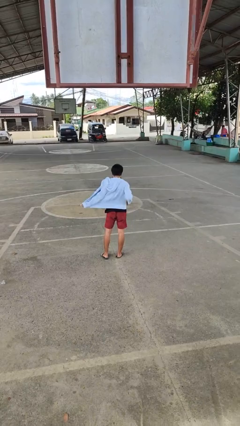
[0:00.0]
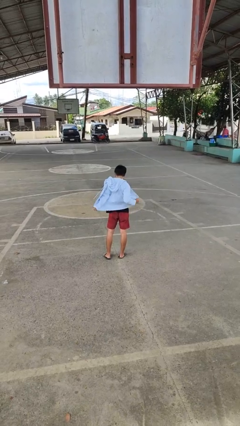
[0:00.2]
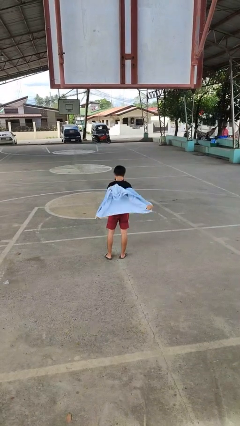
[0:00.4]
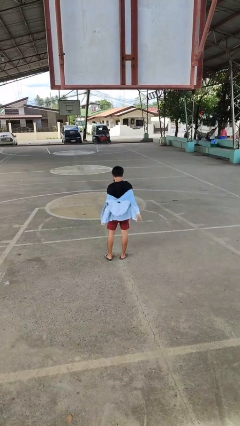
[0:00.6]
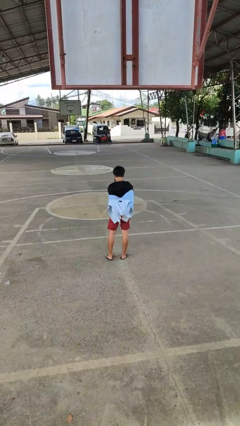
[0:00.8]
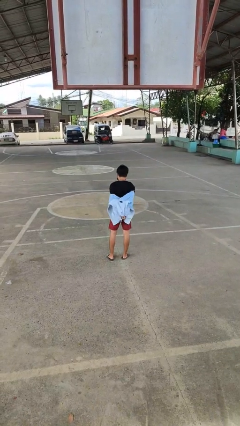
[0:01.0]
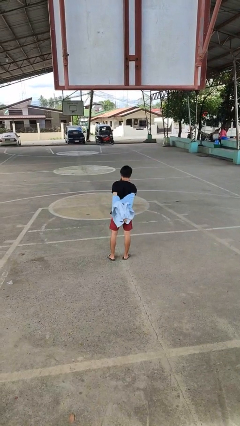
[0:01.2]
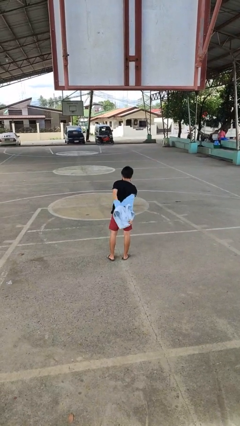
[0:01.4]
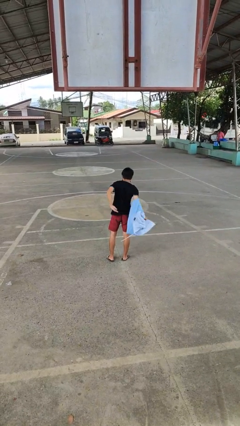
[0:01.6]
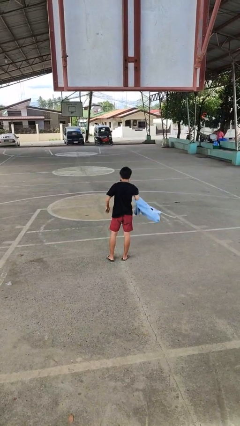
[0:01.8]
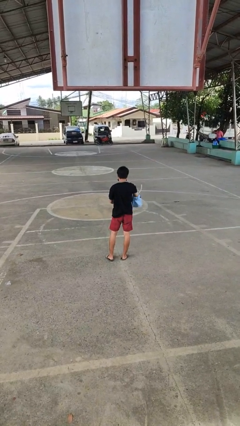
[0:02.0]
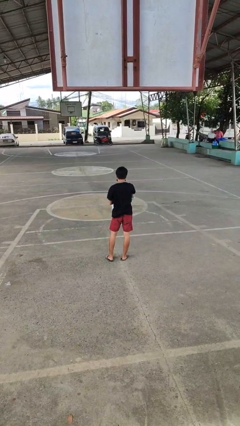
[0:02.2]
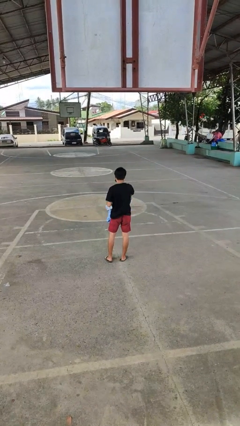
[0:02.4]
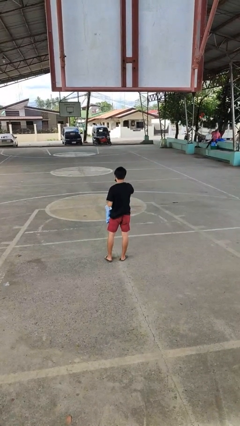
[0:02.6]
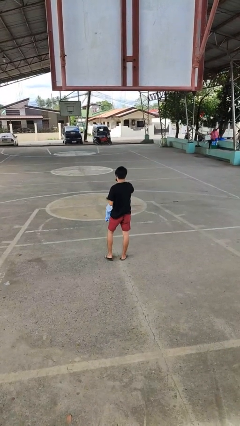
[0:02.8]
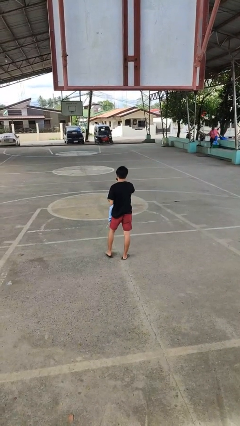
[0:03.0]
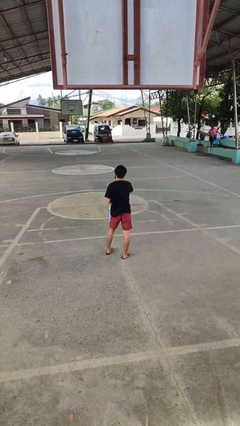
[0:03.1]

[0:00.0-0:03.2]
person takes off jacket

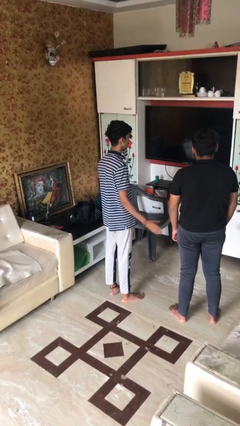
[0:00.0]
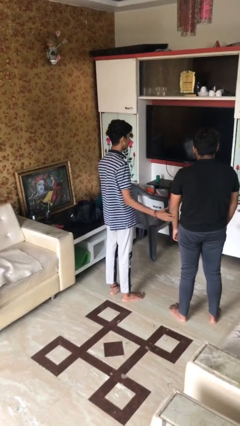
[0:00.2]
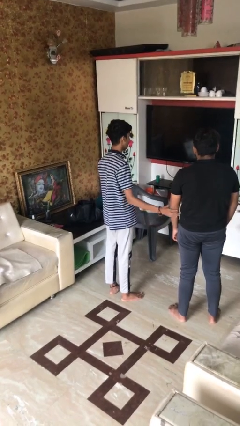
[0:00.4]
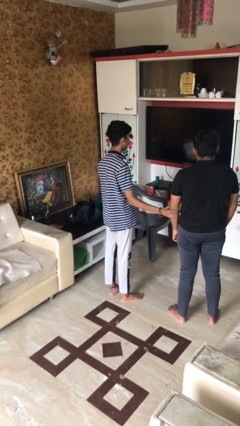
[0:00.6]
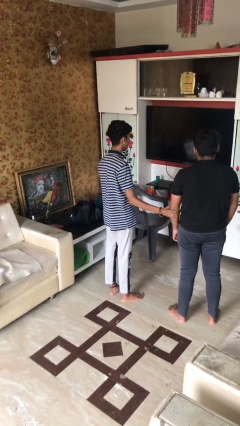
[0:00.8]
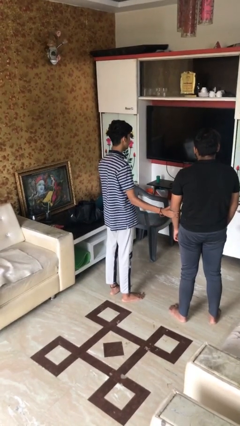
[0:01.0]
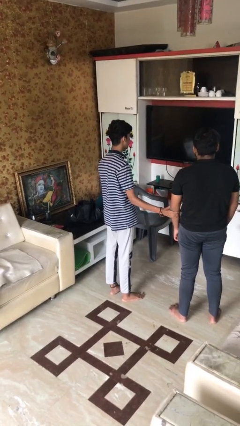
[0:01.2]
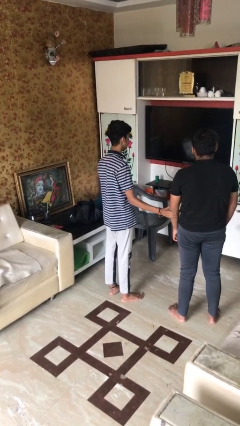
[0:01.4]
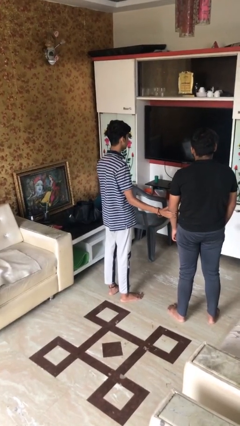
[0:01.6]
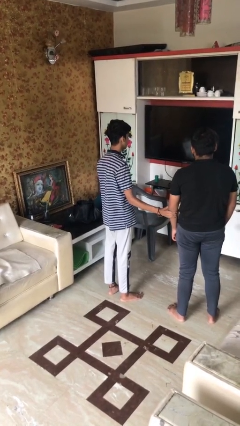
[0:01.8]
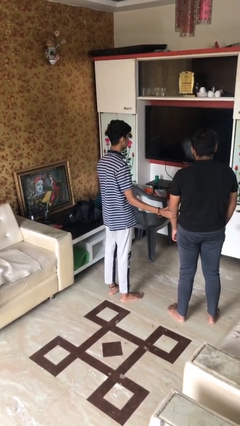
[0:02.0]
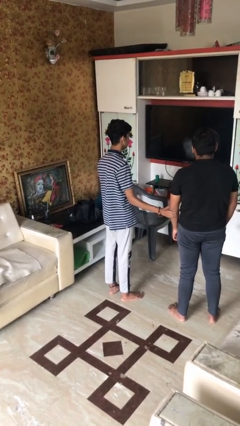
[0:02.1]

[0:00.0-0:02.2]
person grabs person by forearm

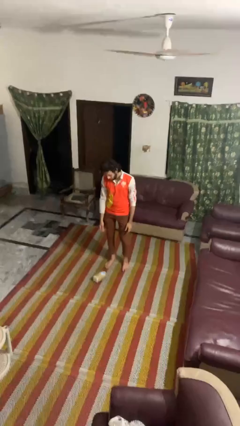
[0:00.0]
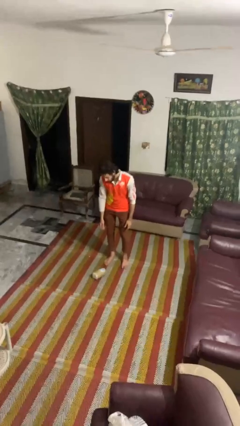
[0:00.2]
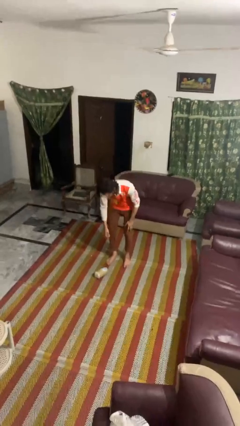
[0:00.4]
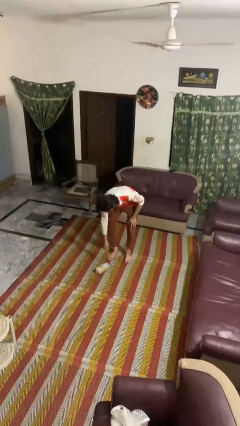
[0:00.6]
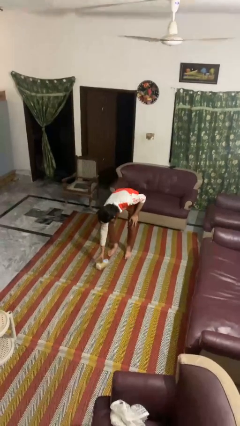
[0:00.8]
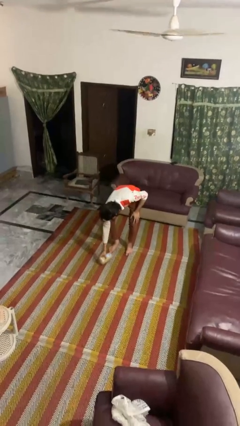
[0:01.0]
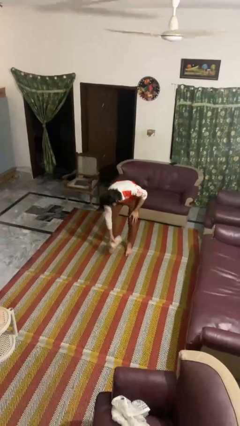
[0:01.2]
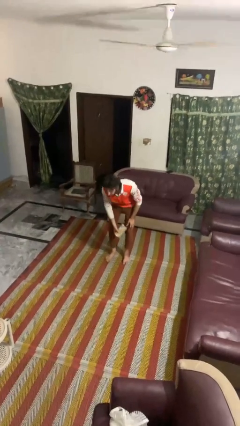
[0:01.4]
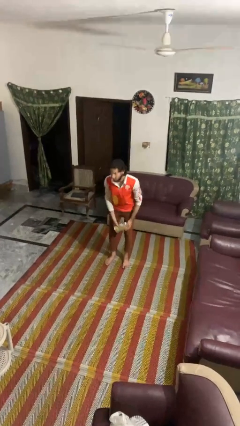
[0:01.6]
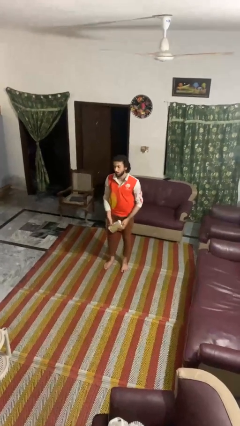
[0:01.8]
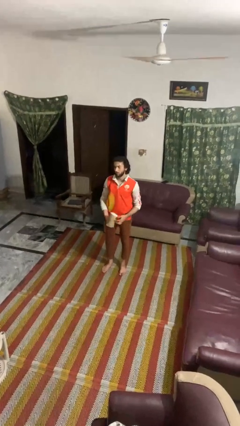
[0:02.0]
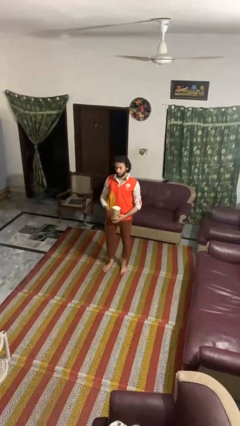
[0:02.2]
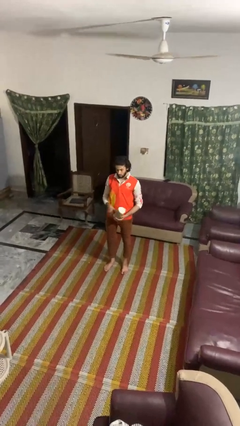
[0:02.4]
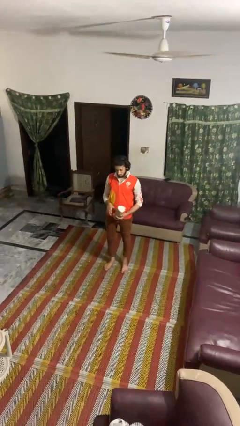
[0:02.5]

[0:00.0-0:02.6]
person picks up object from floor

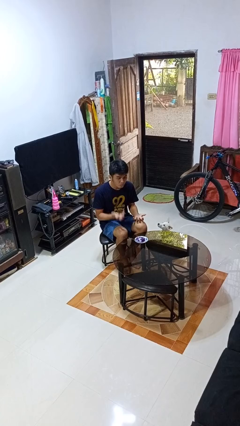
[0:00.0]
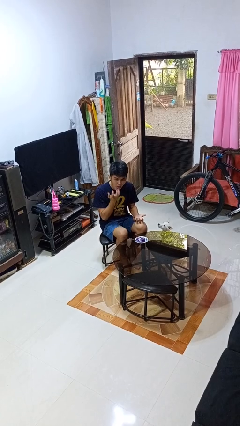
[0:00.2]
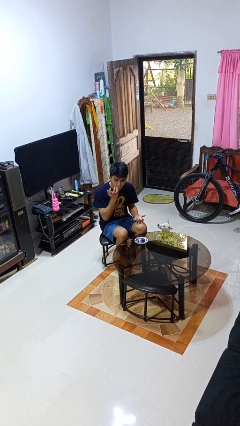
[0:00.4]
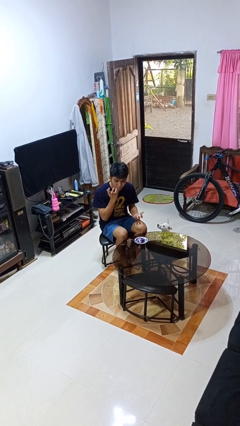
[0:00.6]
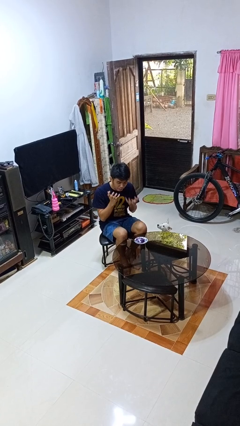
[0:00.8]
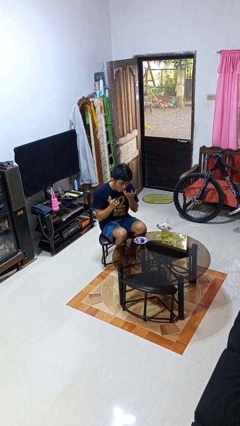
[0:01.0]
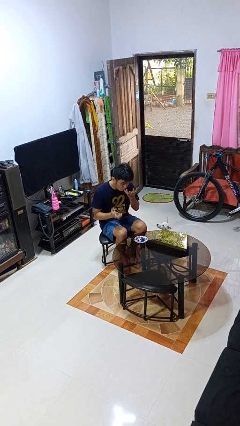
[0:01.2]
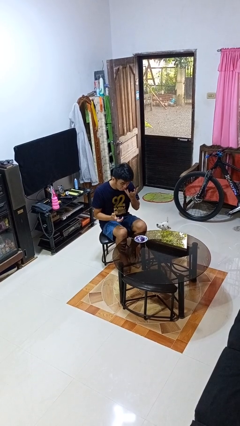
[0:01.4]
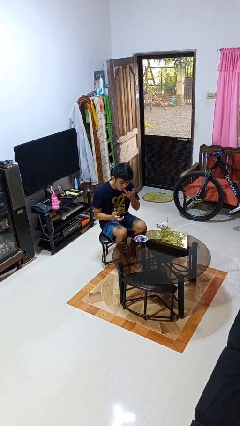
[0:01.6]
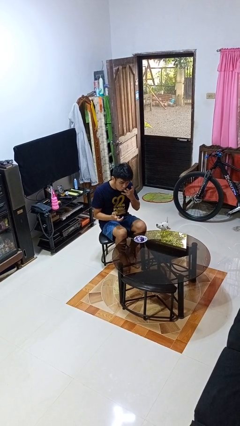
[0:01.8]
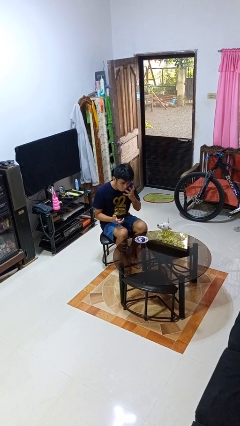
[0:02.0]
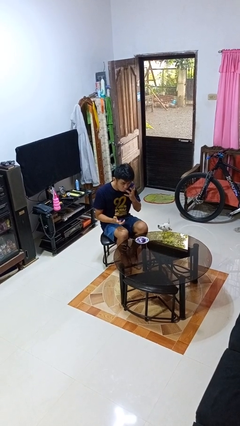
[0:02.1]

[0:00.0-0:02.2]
person licks fingers

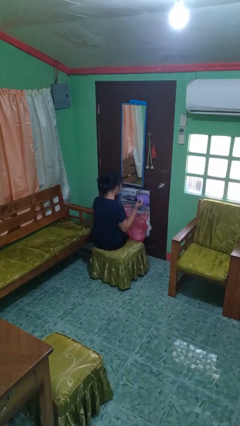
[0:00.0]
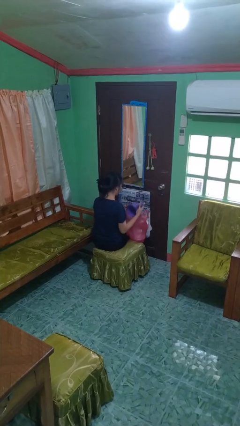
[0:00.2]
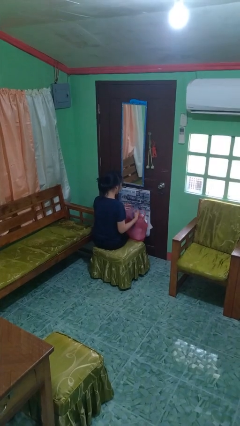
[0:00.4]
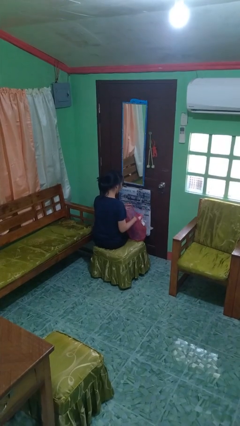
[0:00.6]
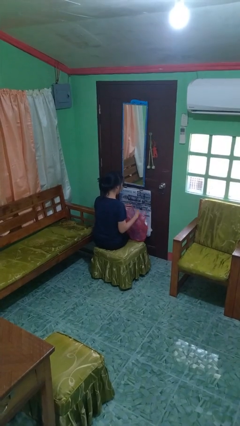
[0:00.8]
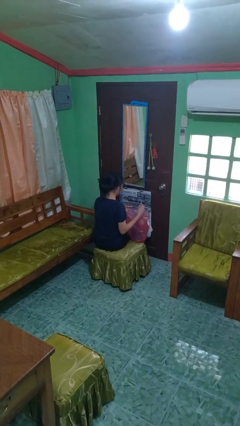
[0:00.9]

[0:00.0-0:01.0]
person puts object into bag

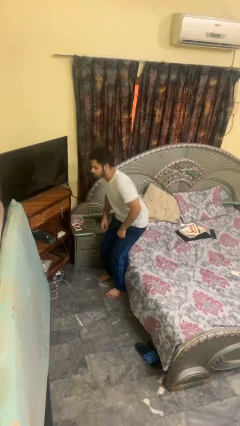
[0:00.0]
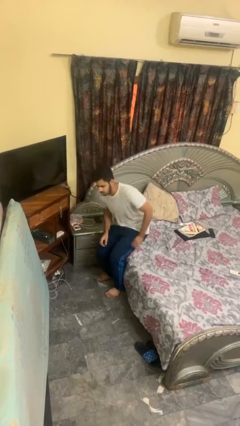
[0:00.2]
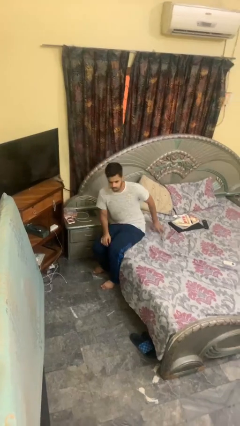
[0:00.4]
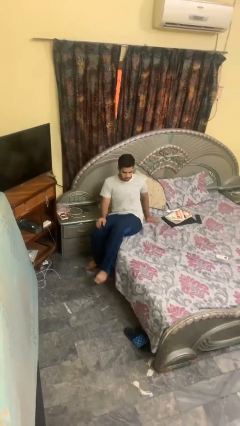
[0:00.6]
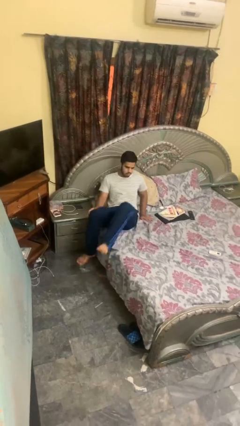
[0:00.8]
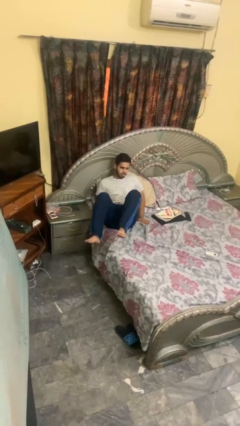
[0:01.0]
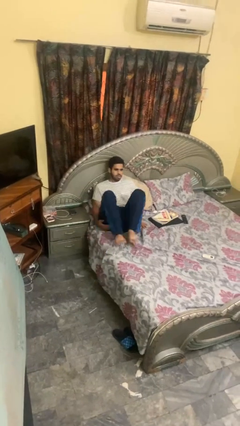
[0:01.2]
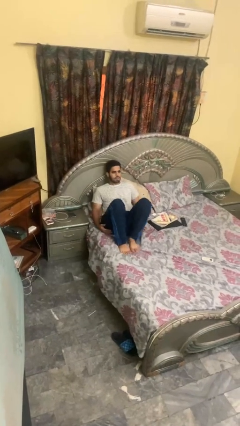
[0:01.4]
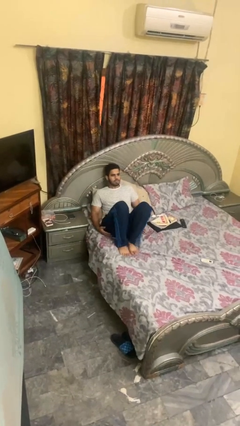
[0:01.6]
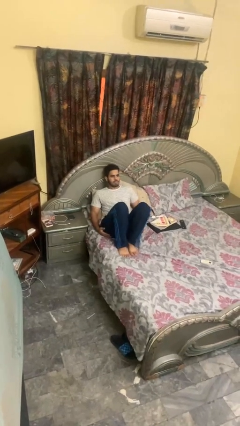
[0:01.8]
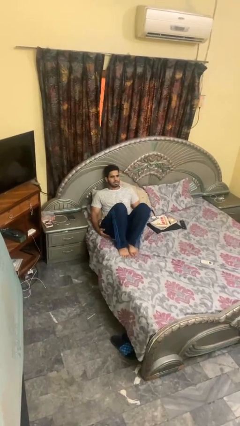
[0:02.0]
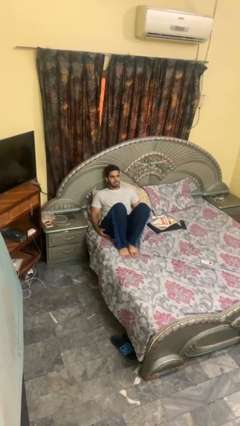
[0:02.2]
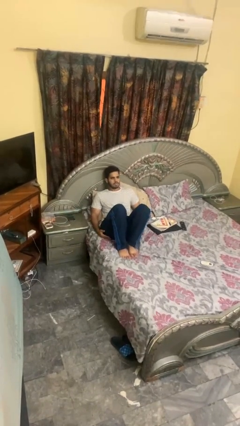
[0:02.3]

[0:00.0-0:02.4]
person lies down on bed

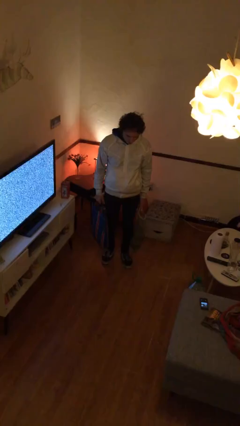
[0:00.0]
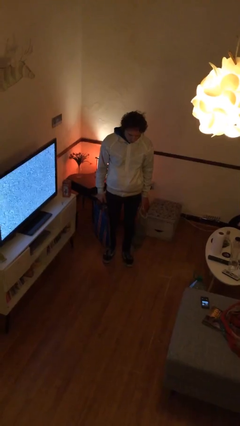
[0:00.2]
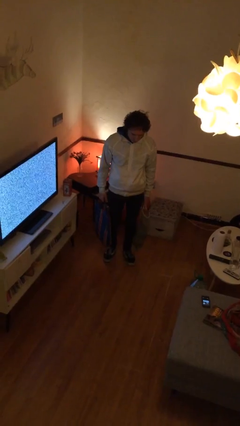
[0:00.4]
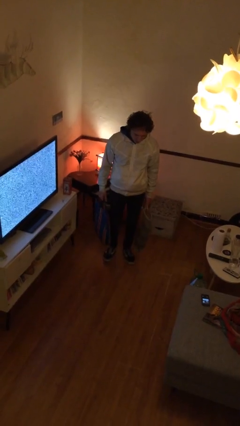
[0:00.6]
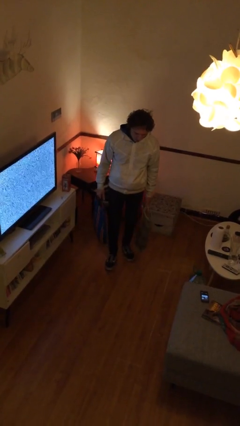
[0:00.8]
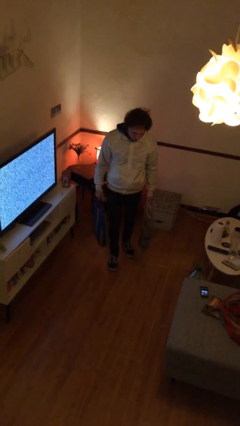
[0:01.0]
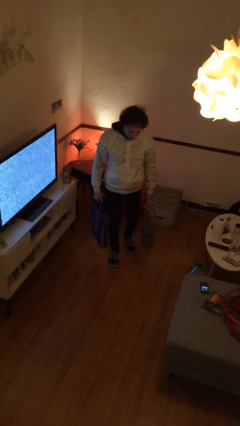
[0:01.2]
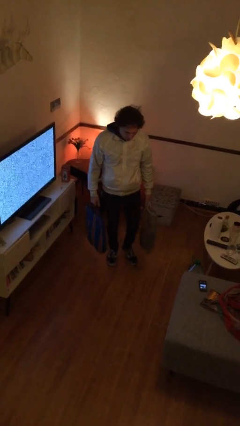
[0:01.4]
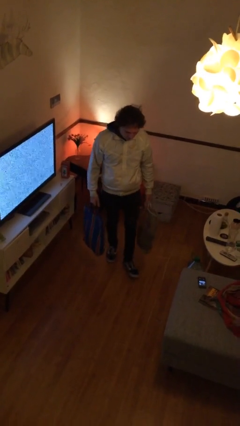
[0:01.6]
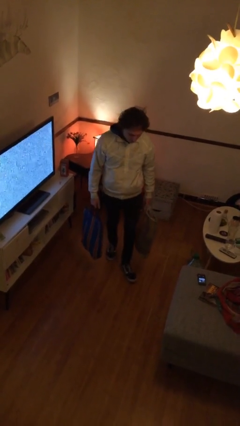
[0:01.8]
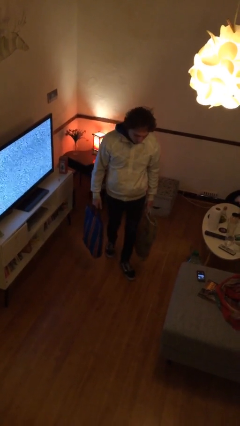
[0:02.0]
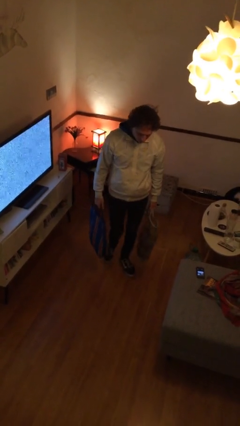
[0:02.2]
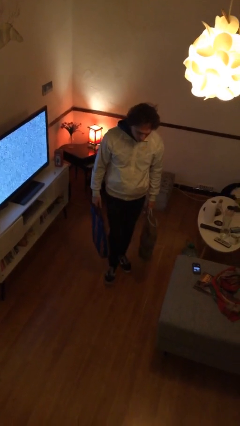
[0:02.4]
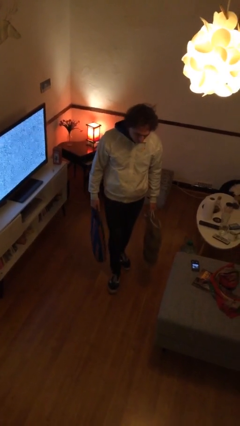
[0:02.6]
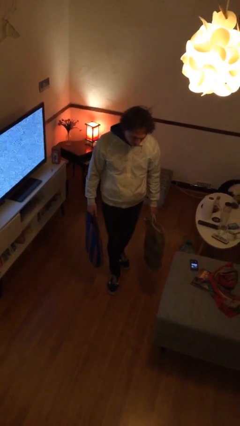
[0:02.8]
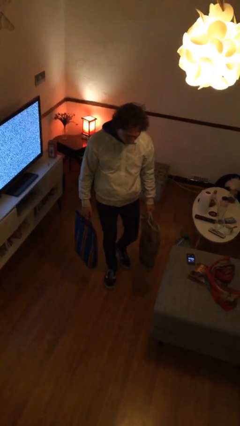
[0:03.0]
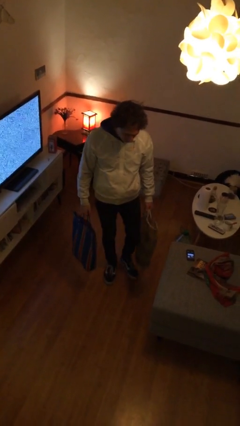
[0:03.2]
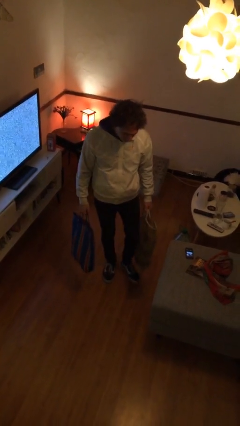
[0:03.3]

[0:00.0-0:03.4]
person carries groceries
